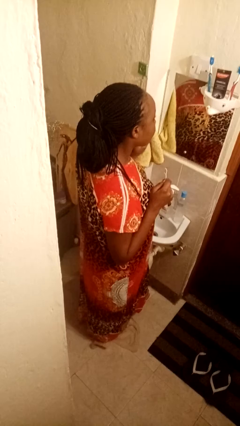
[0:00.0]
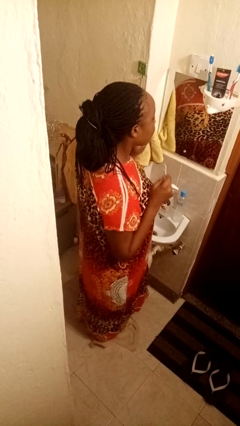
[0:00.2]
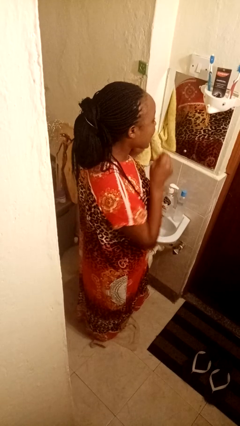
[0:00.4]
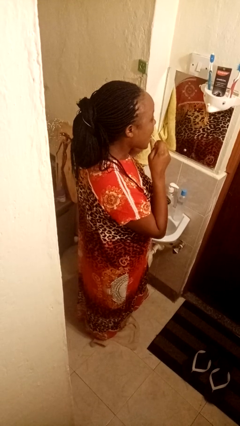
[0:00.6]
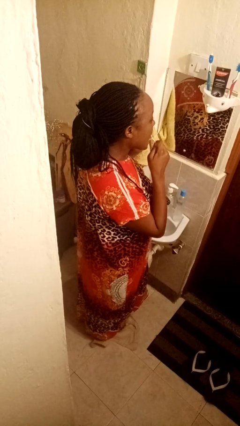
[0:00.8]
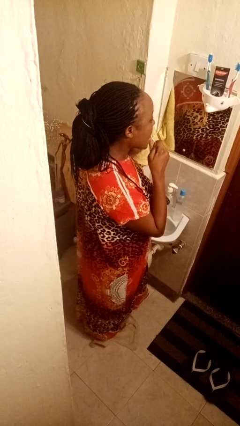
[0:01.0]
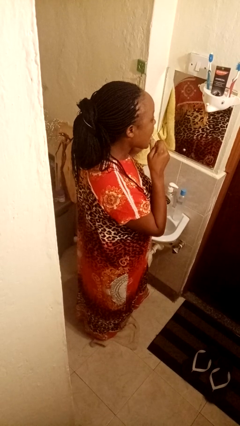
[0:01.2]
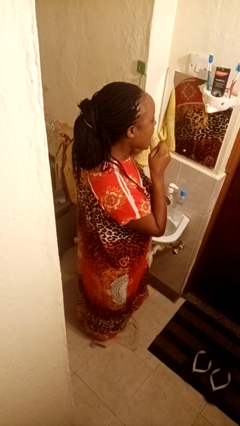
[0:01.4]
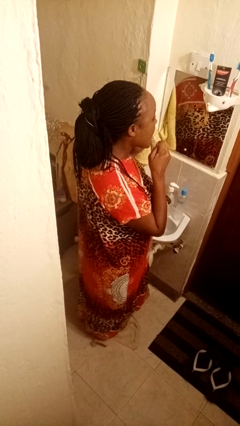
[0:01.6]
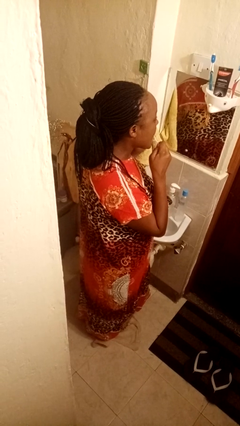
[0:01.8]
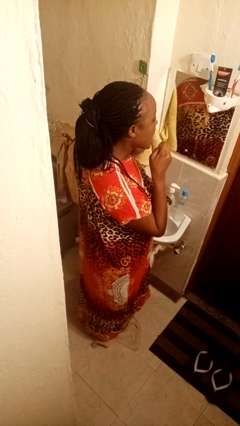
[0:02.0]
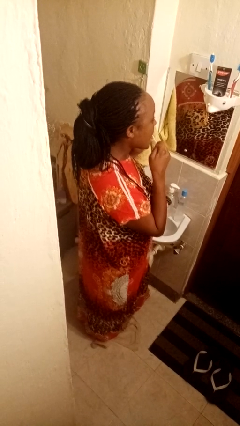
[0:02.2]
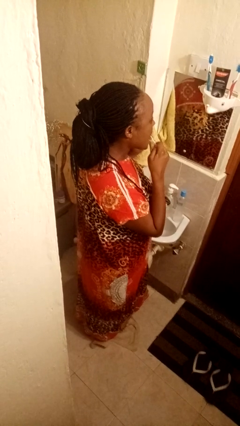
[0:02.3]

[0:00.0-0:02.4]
person flosses

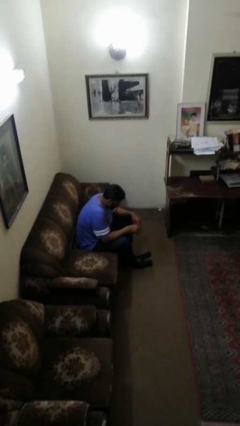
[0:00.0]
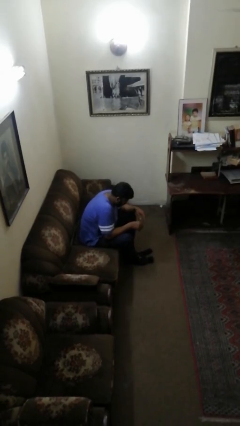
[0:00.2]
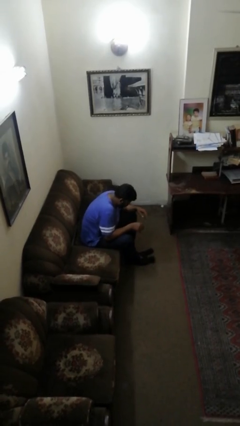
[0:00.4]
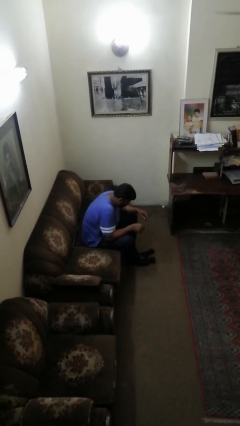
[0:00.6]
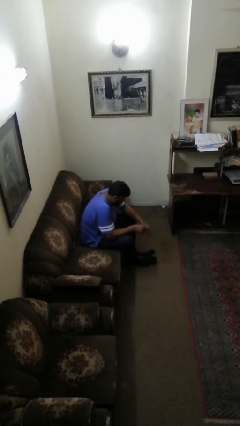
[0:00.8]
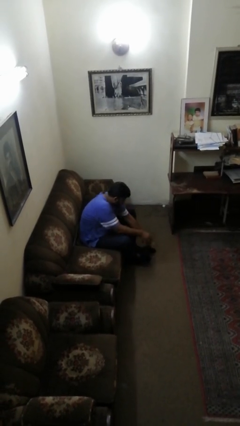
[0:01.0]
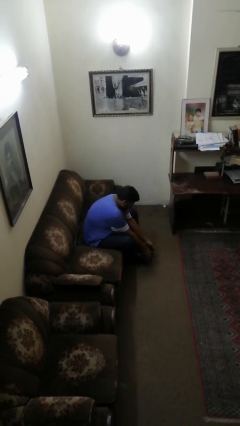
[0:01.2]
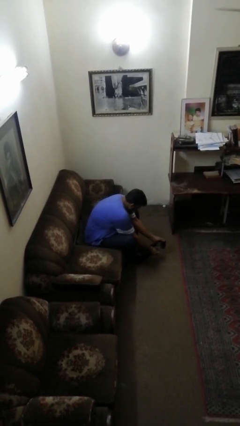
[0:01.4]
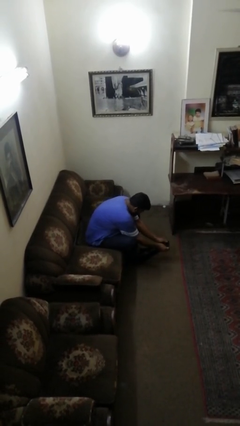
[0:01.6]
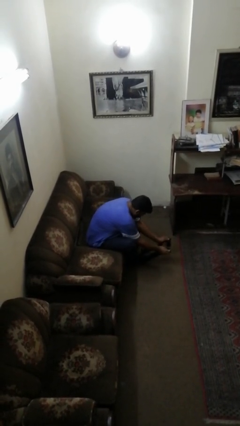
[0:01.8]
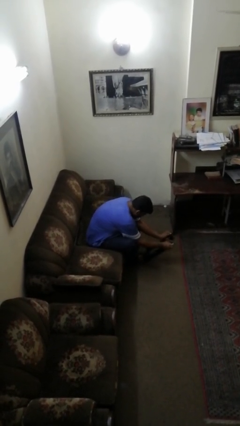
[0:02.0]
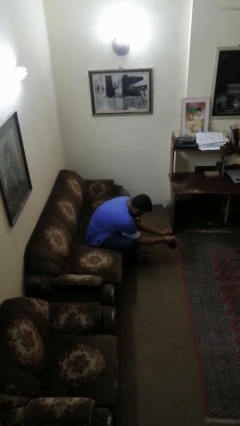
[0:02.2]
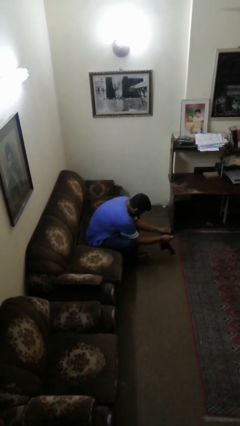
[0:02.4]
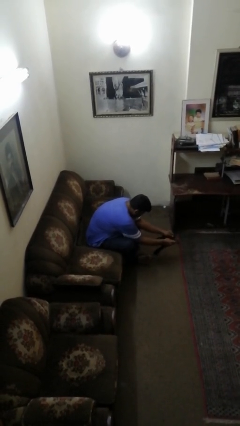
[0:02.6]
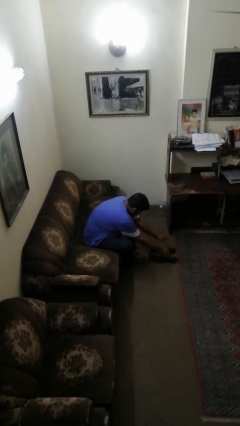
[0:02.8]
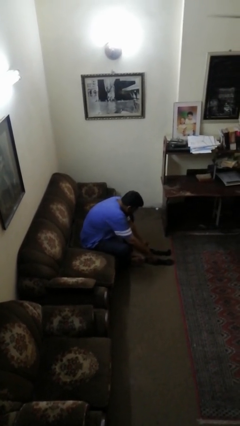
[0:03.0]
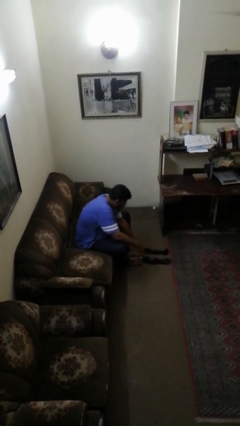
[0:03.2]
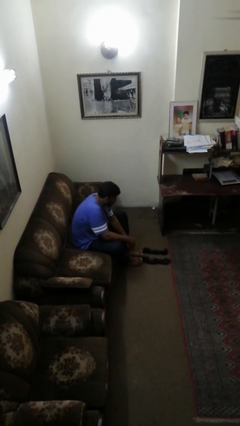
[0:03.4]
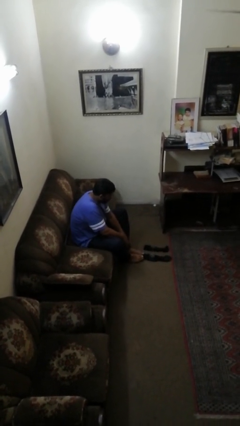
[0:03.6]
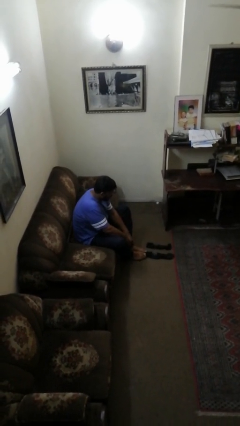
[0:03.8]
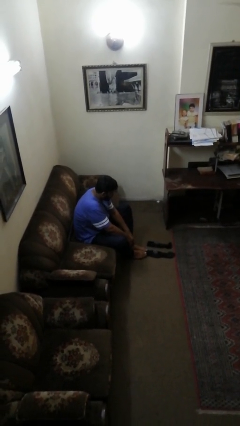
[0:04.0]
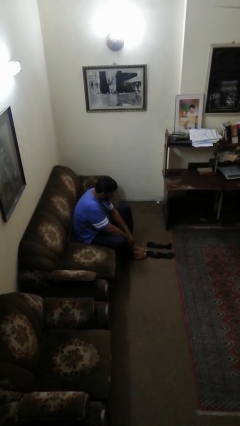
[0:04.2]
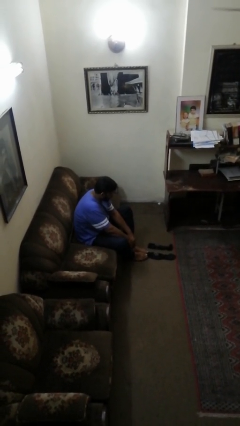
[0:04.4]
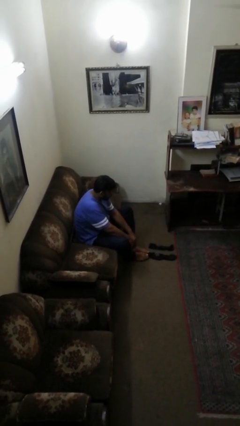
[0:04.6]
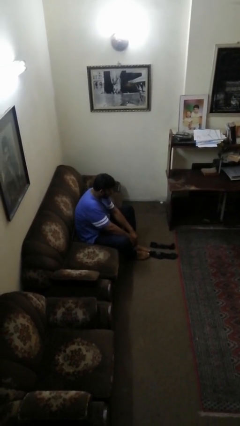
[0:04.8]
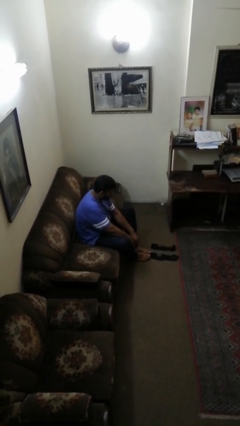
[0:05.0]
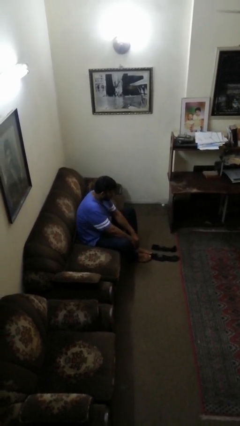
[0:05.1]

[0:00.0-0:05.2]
person takes off socks

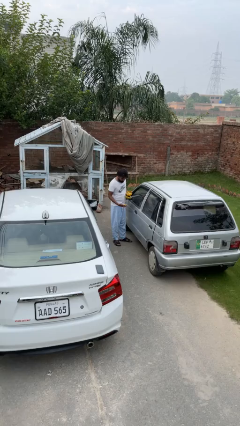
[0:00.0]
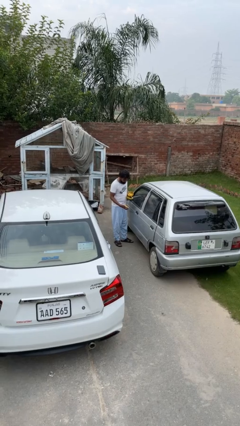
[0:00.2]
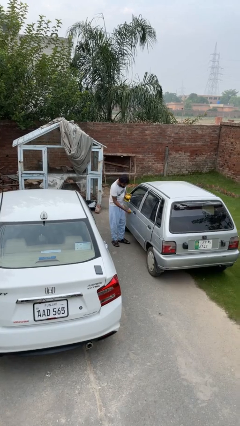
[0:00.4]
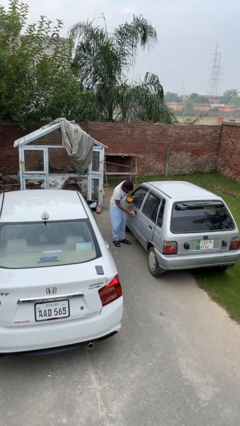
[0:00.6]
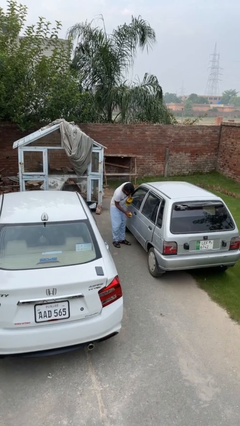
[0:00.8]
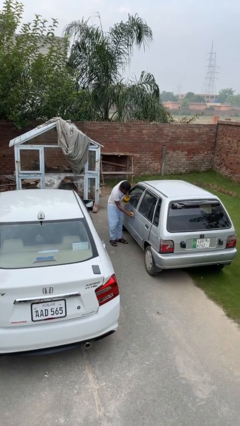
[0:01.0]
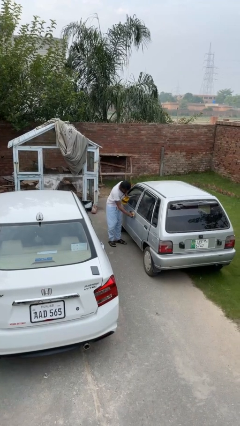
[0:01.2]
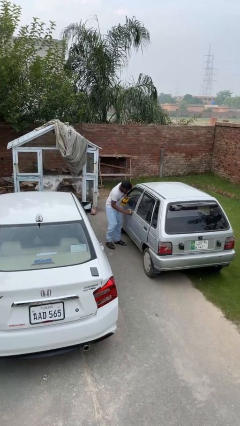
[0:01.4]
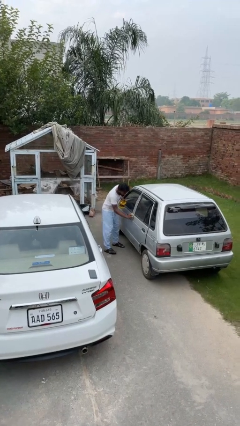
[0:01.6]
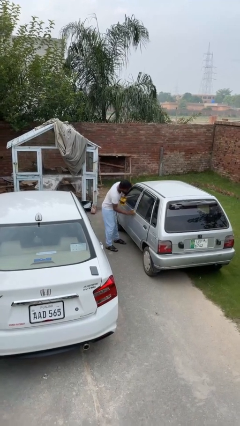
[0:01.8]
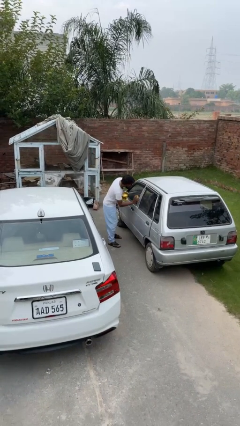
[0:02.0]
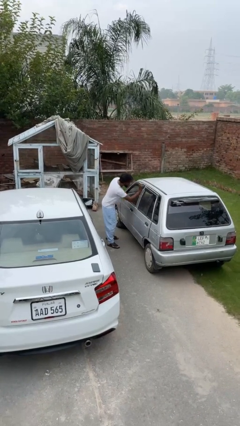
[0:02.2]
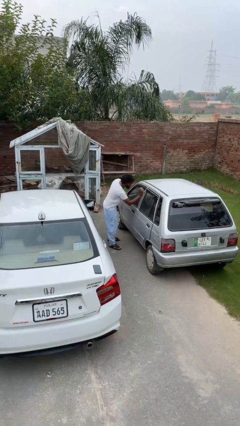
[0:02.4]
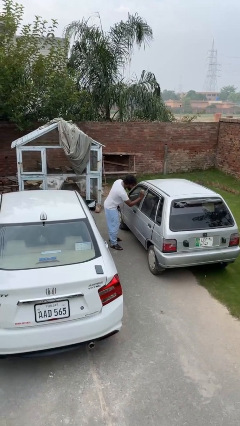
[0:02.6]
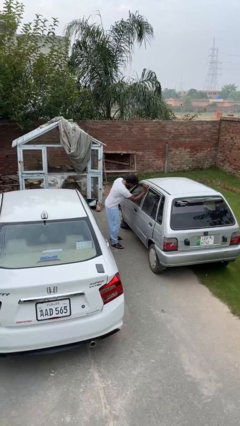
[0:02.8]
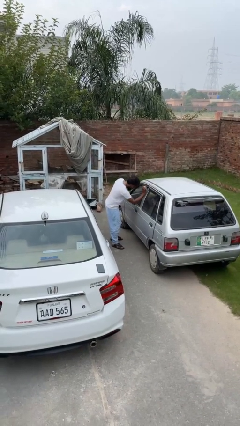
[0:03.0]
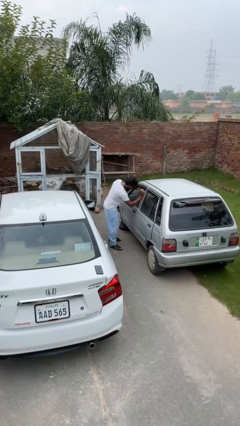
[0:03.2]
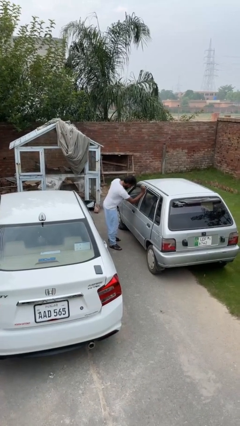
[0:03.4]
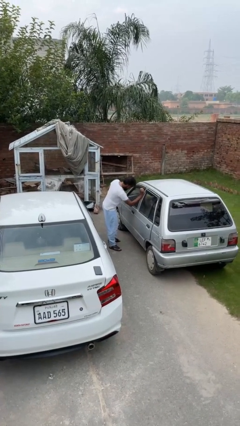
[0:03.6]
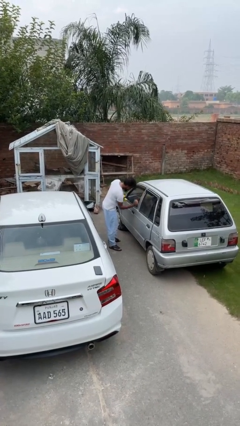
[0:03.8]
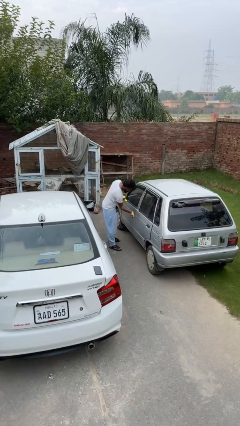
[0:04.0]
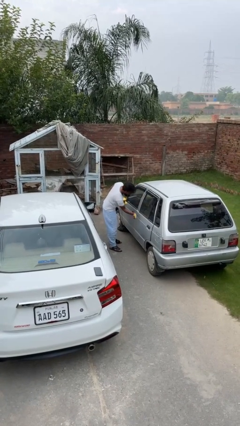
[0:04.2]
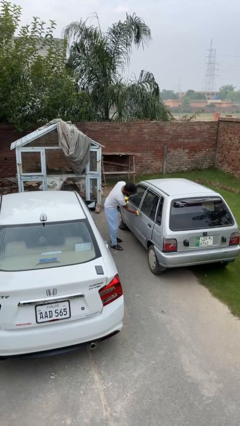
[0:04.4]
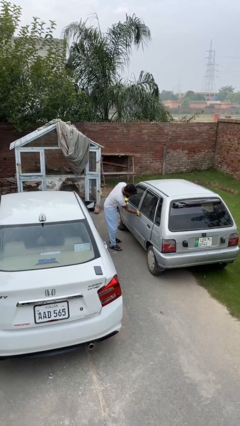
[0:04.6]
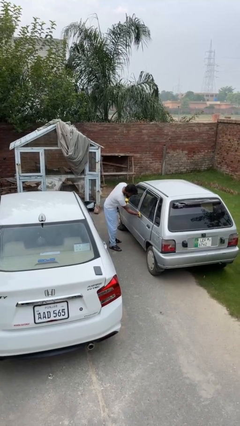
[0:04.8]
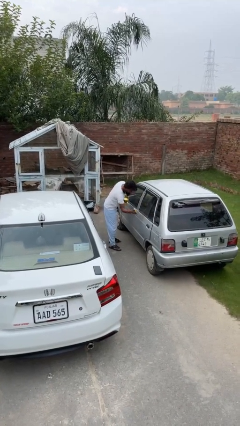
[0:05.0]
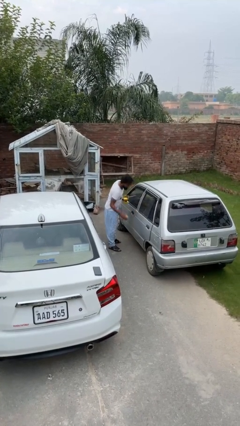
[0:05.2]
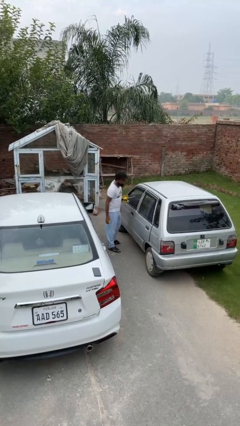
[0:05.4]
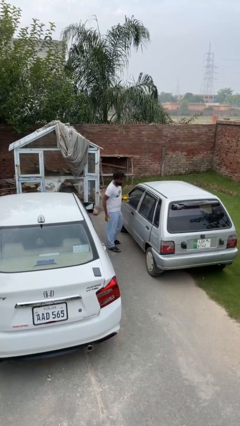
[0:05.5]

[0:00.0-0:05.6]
person polishes car with rag

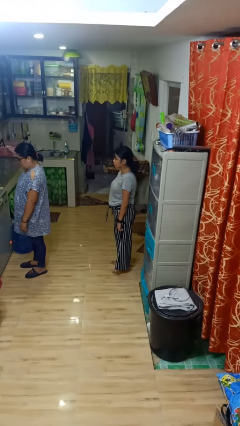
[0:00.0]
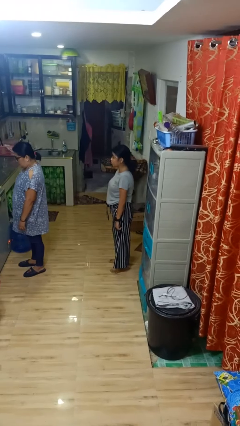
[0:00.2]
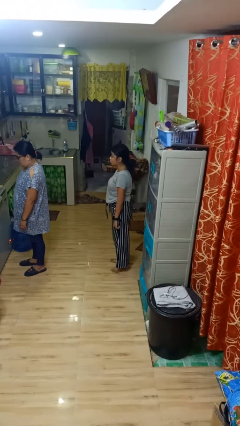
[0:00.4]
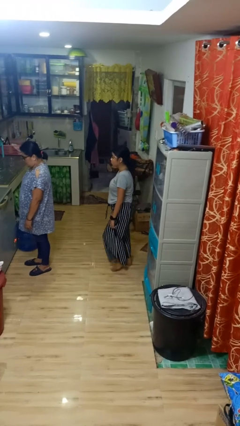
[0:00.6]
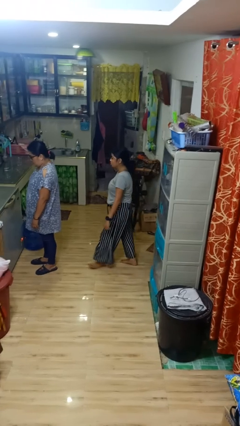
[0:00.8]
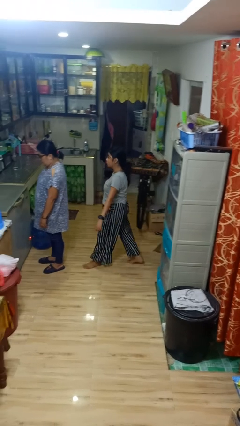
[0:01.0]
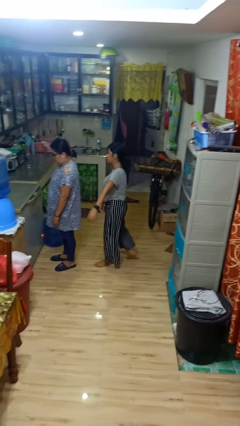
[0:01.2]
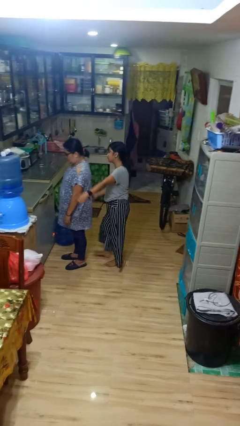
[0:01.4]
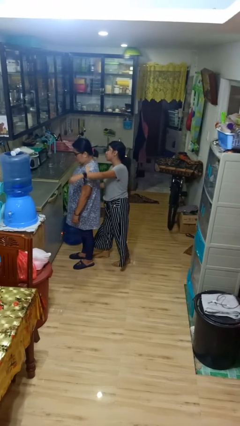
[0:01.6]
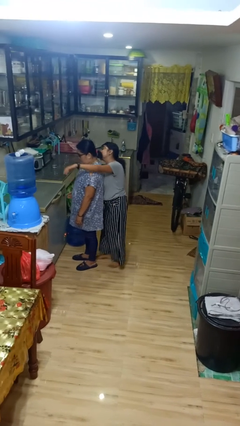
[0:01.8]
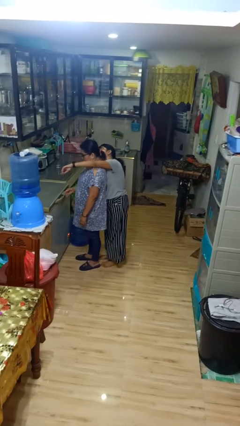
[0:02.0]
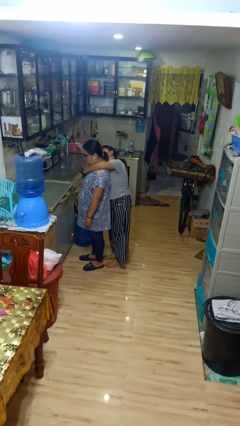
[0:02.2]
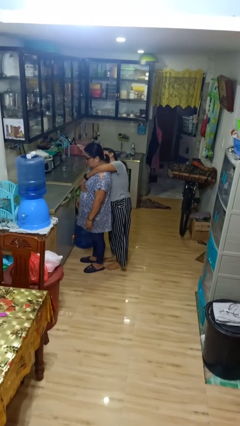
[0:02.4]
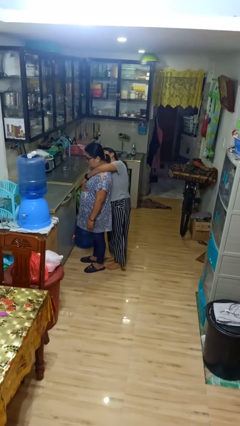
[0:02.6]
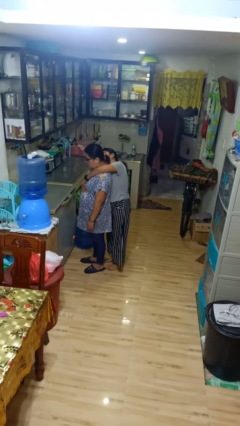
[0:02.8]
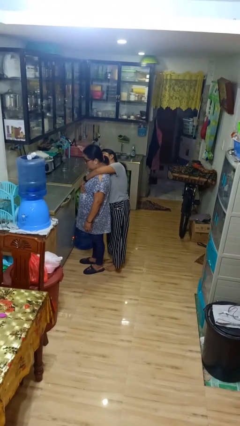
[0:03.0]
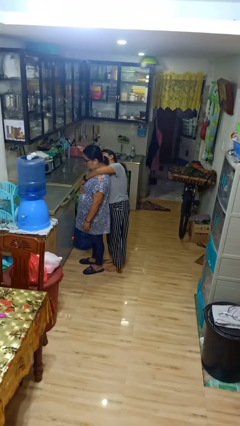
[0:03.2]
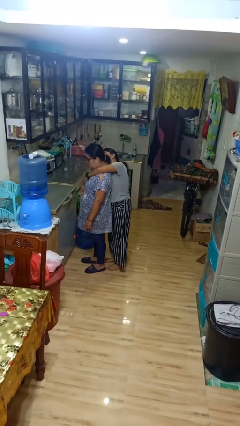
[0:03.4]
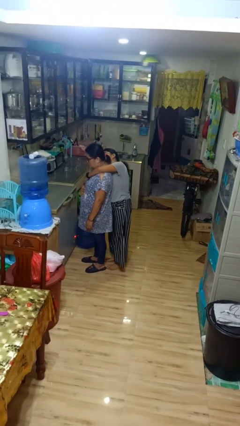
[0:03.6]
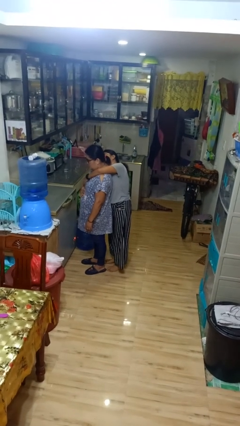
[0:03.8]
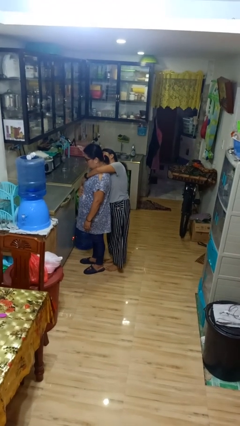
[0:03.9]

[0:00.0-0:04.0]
person hugs person from behind
